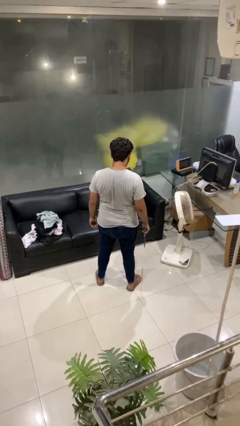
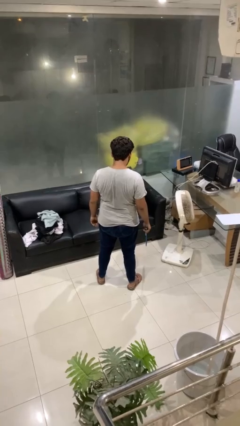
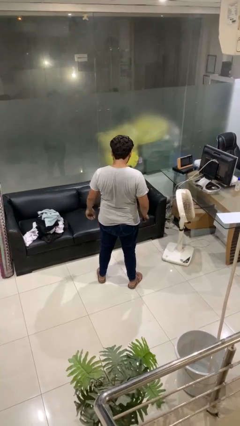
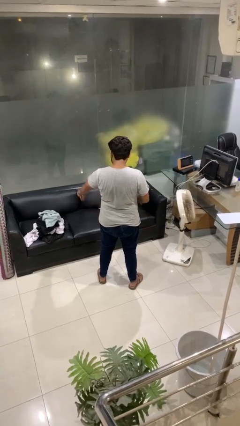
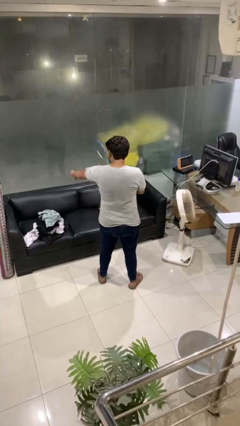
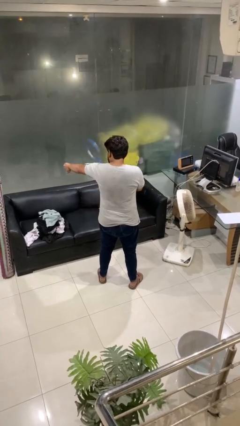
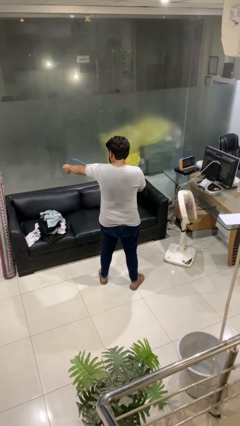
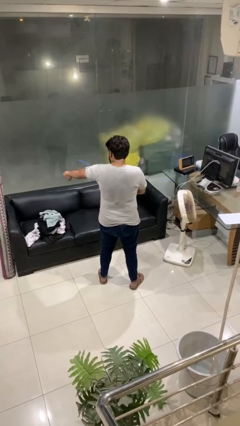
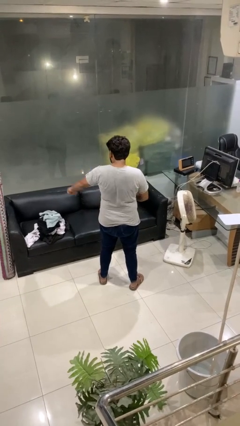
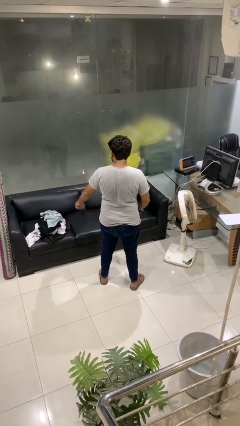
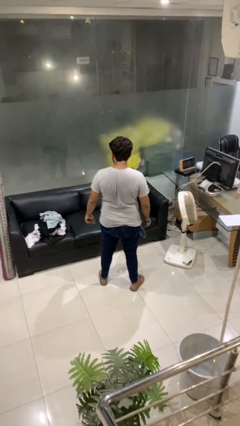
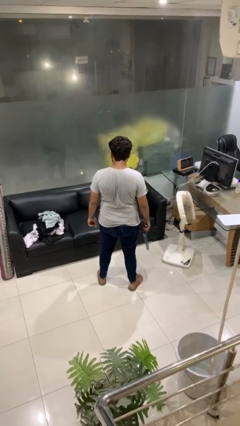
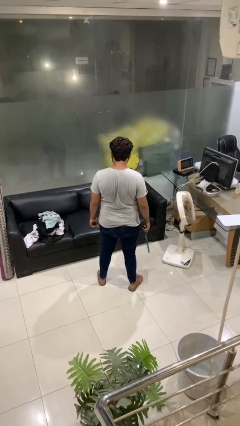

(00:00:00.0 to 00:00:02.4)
person swats bug

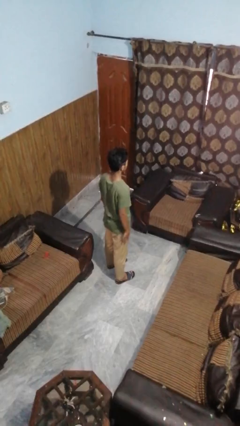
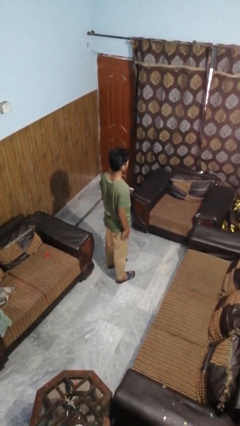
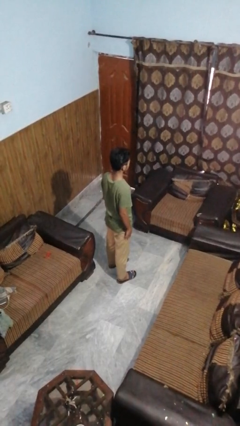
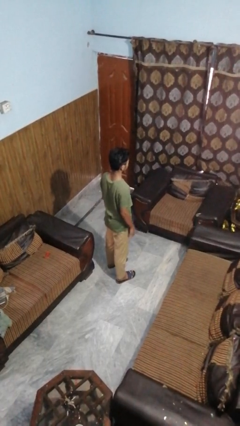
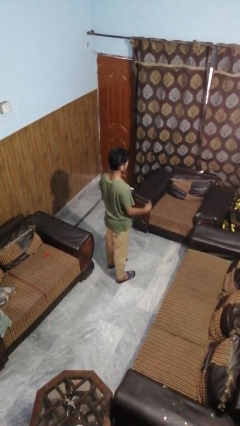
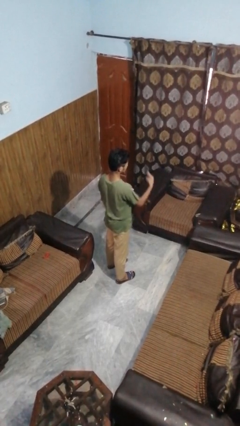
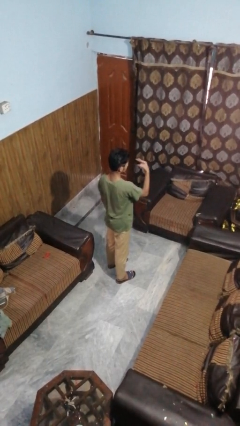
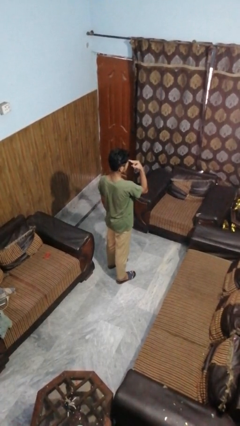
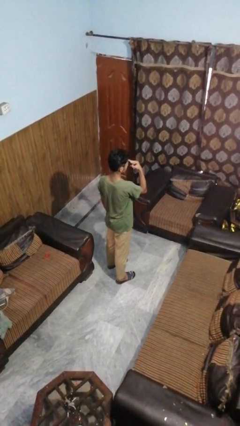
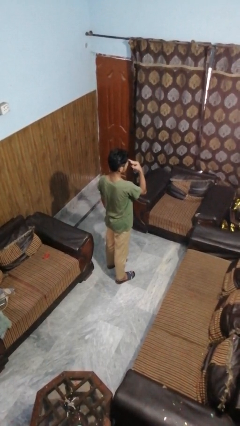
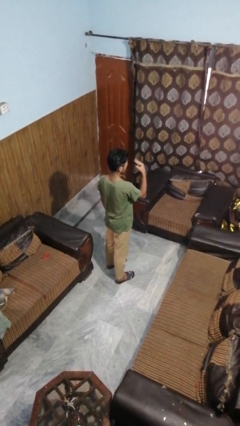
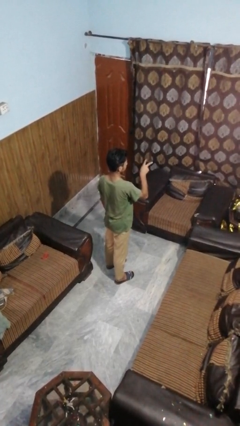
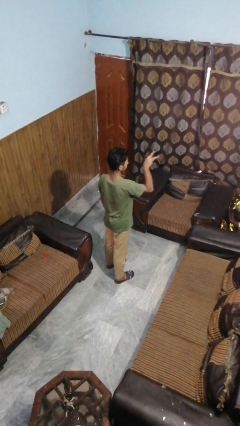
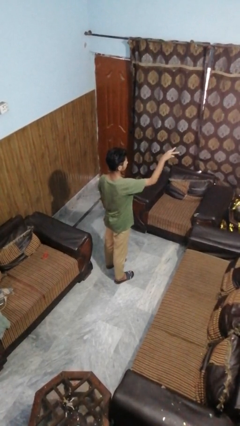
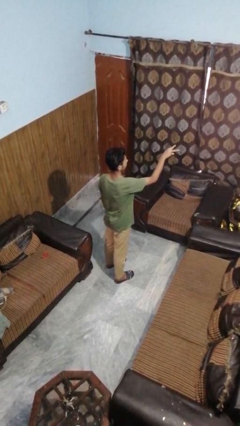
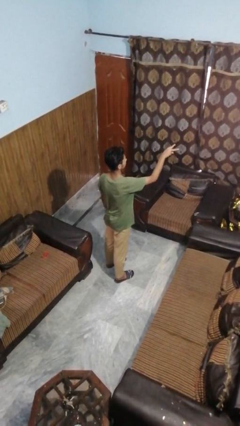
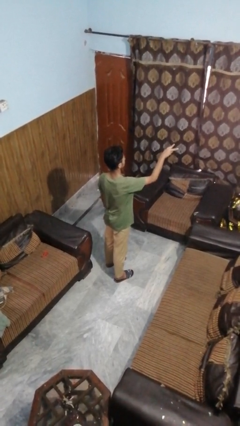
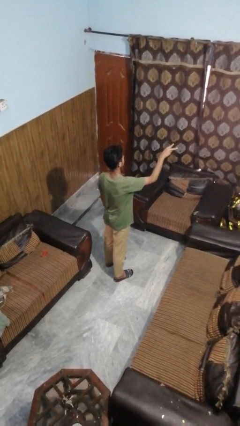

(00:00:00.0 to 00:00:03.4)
person gestures watch closely

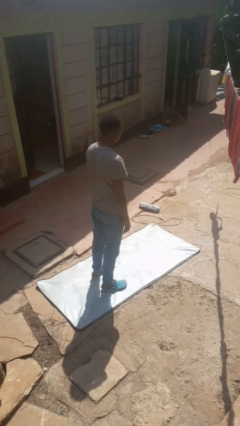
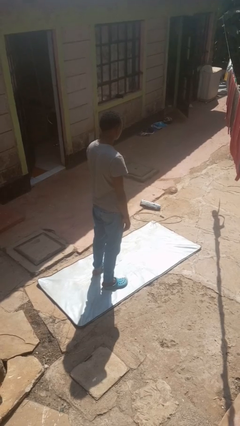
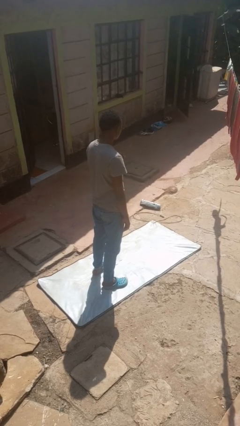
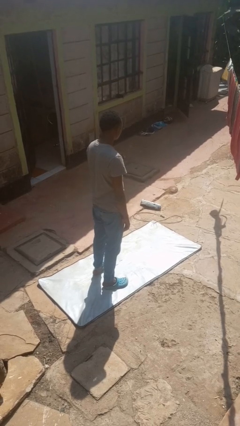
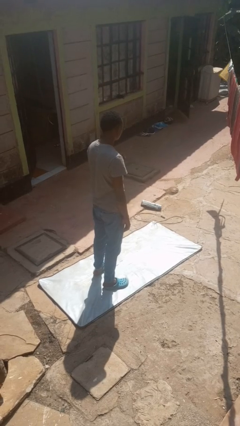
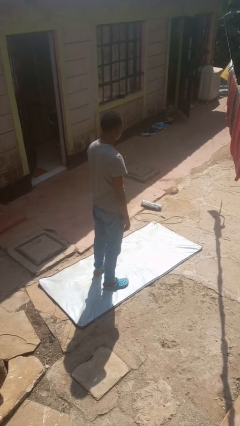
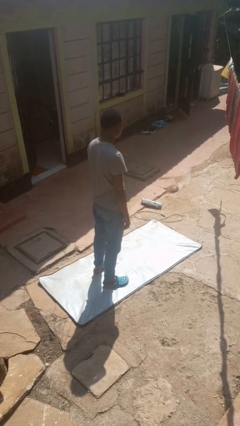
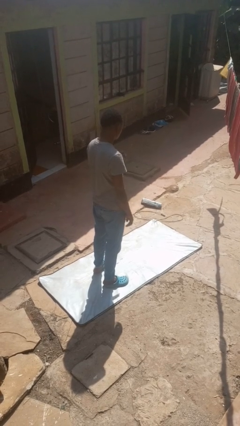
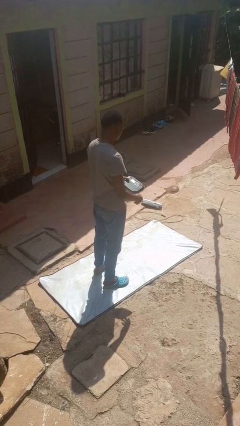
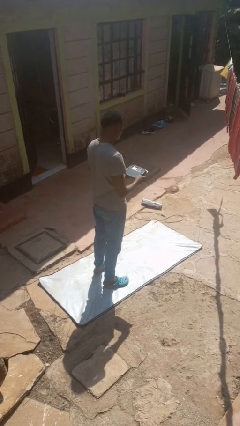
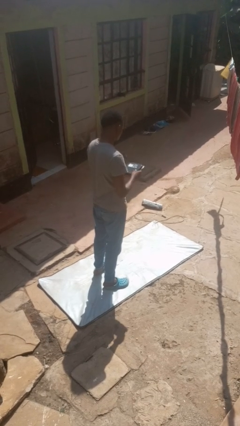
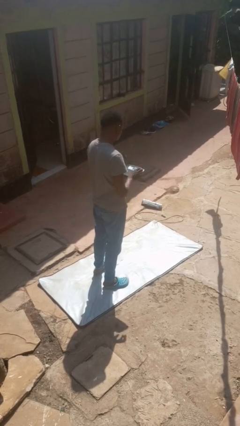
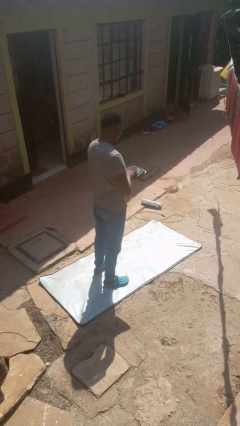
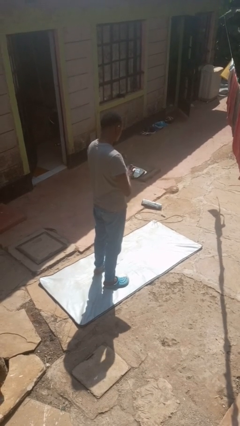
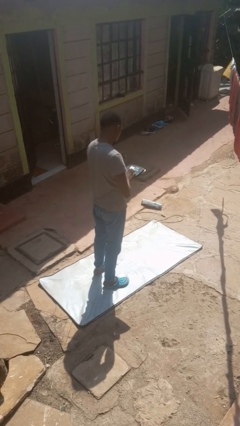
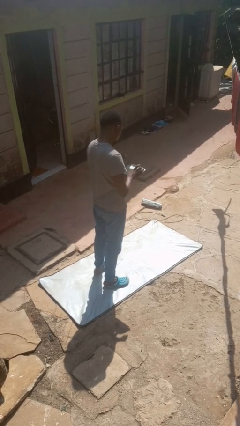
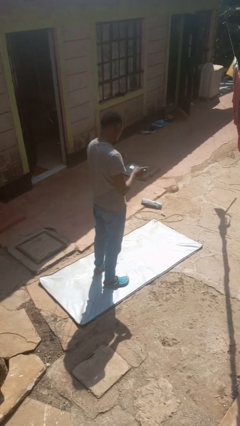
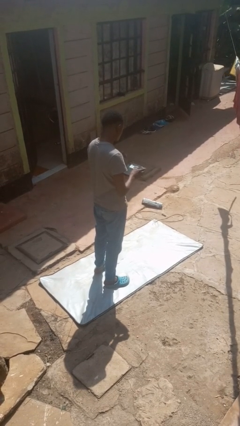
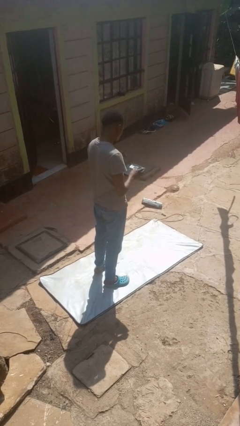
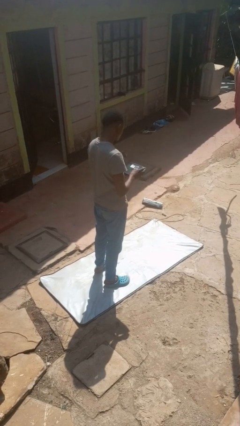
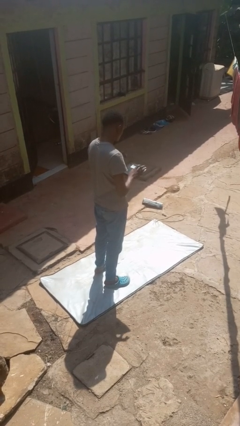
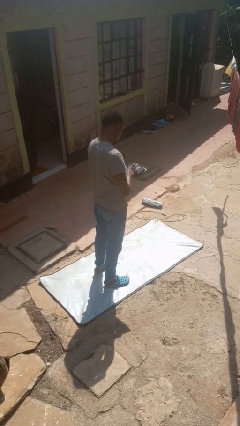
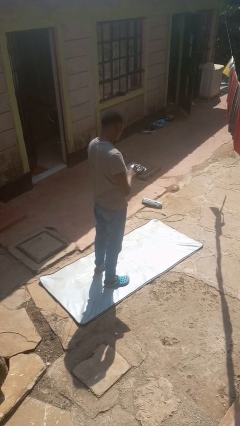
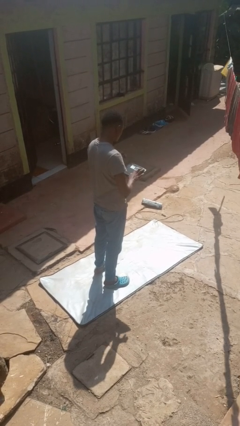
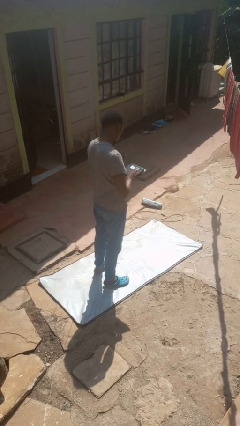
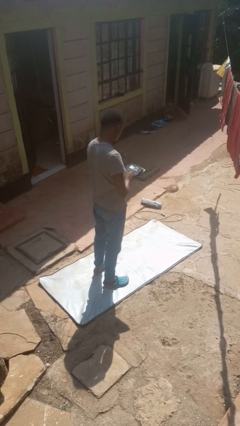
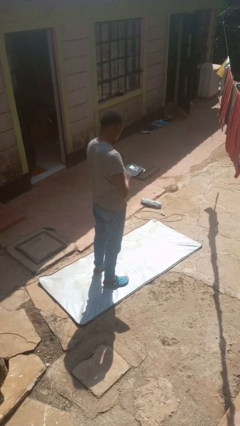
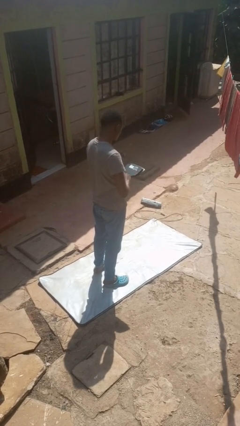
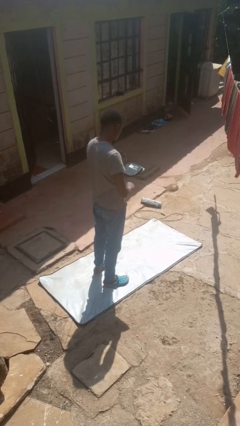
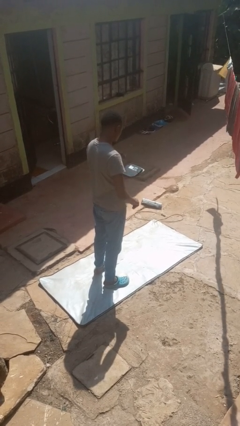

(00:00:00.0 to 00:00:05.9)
person interacts with tablet

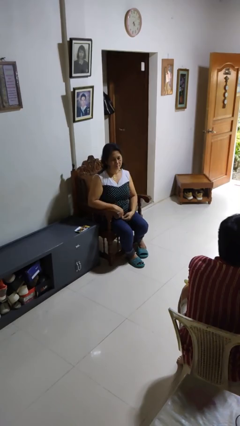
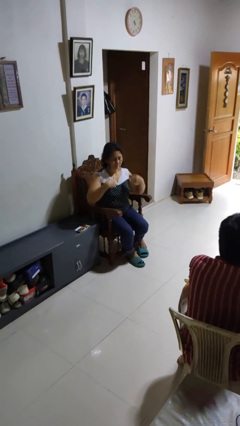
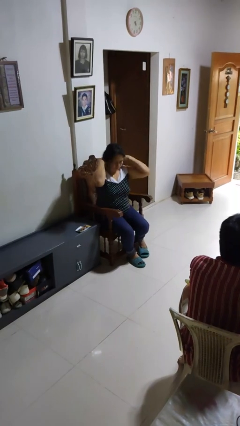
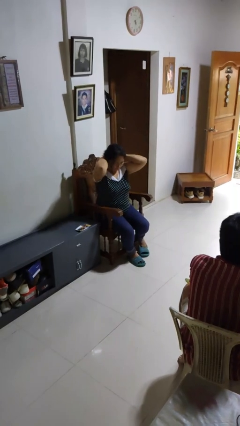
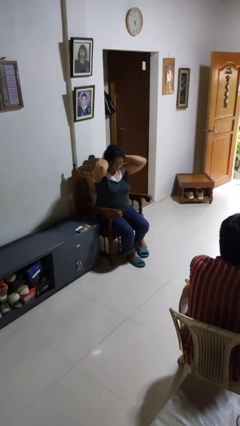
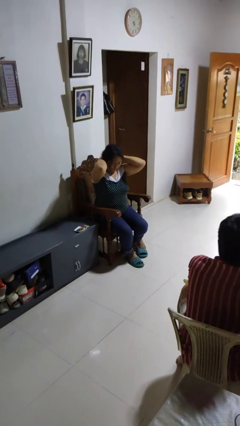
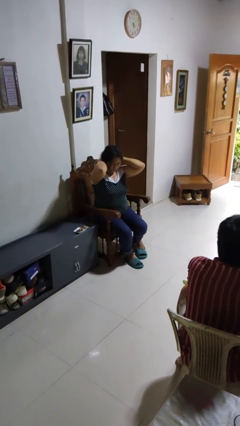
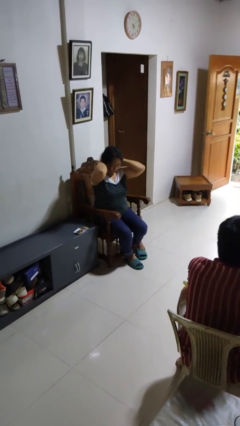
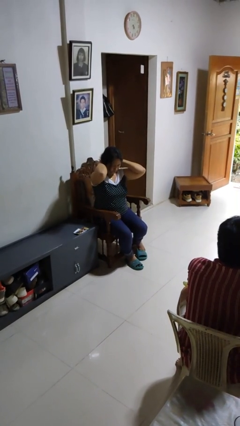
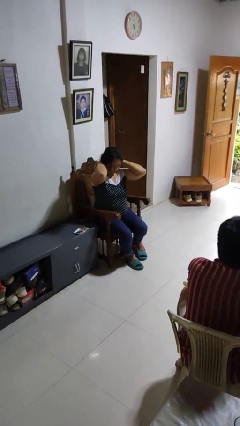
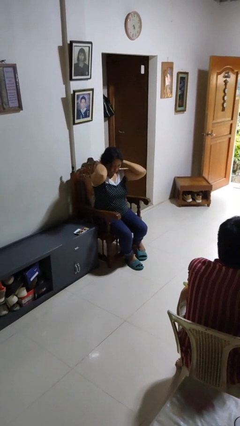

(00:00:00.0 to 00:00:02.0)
person takes off necklace

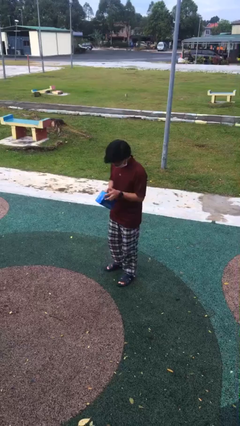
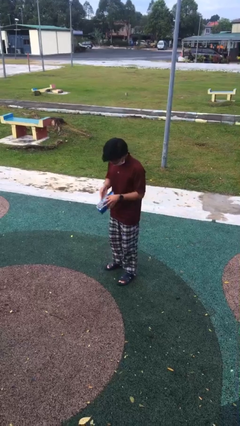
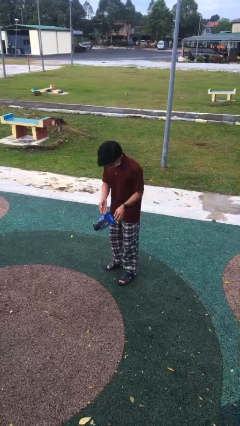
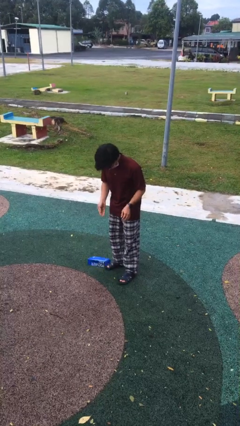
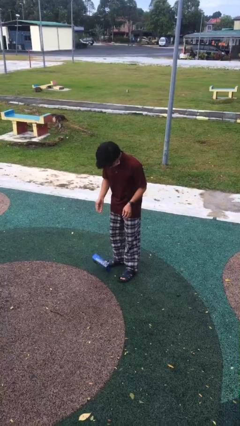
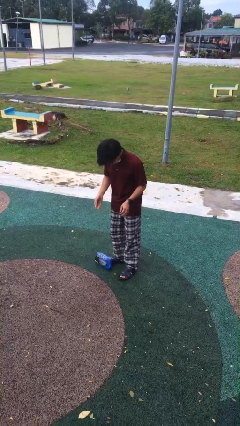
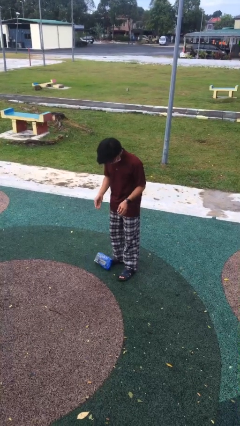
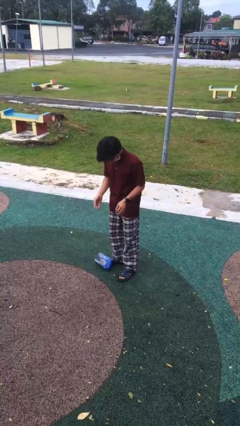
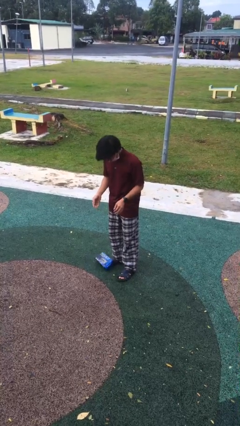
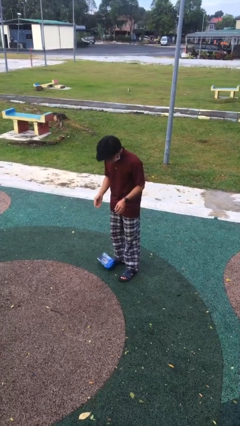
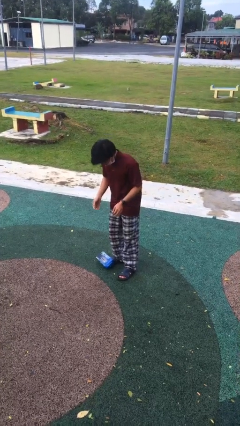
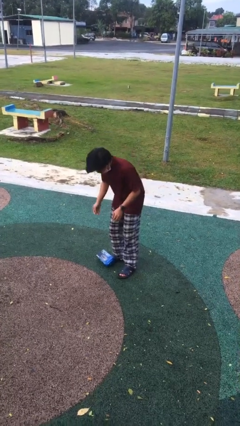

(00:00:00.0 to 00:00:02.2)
person drops object

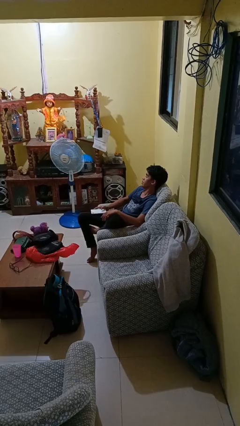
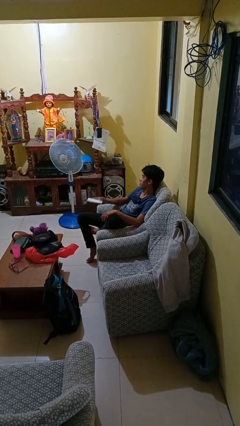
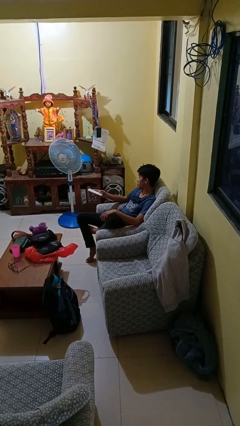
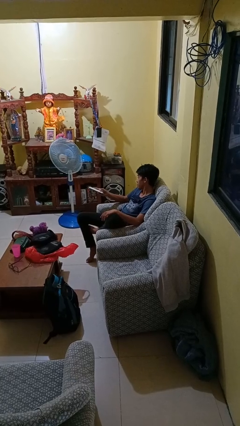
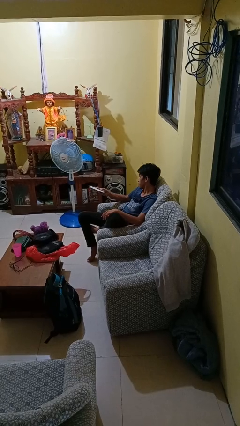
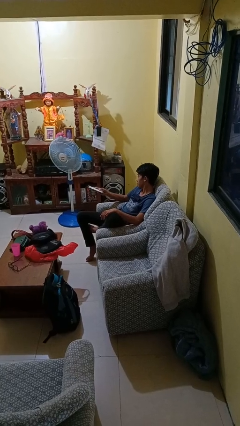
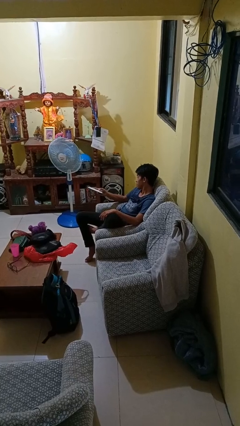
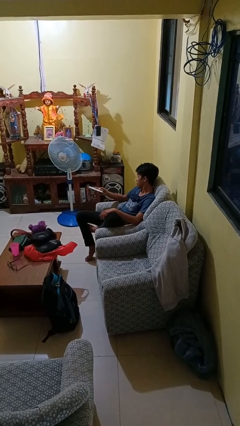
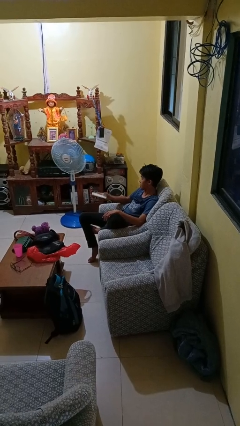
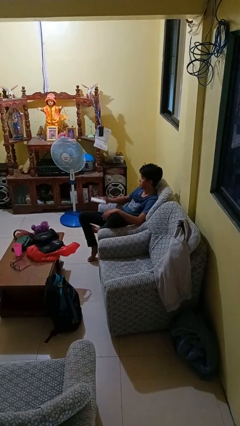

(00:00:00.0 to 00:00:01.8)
person uses television remote
